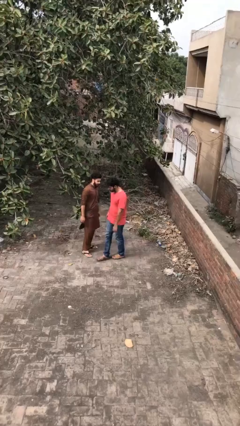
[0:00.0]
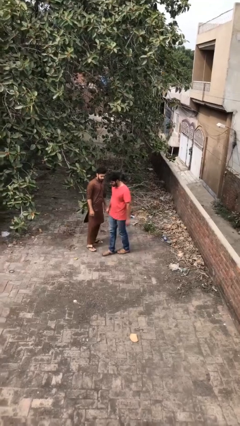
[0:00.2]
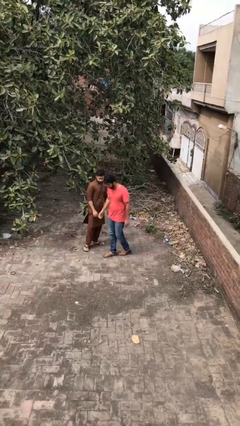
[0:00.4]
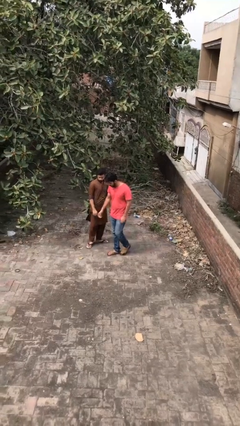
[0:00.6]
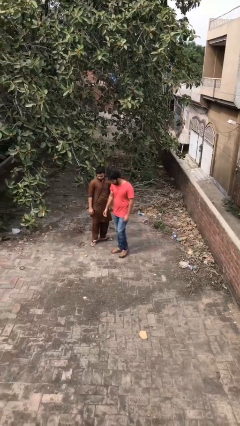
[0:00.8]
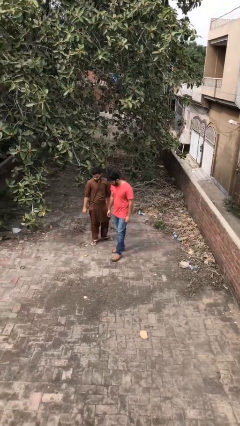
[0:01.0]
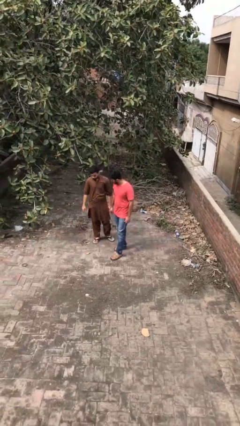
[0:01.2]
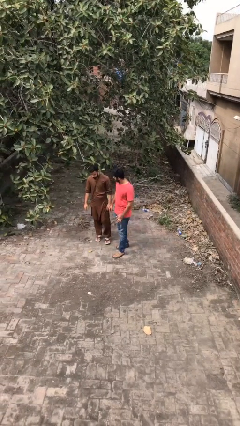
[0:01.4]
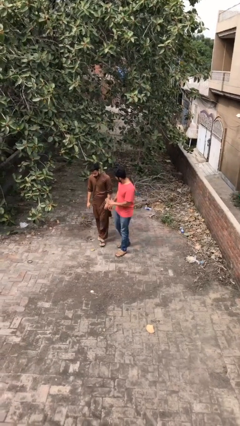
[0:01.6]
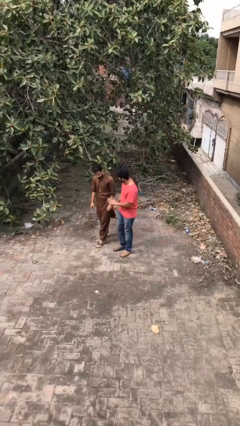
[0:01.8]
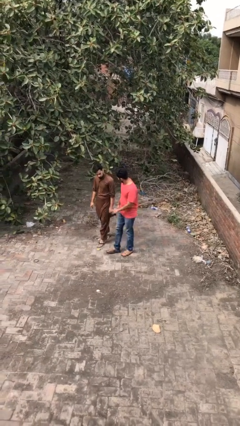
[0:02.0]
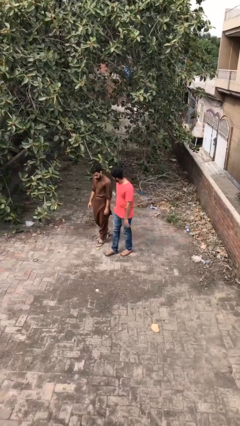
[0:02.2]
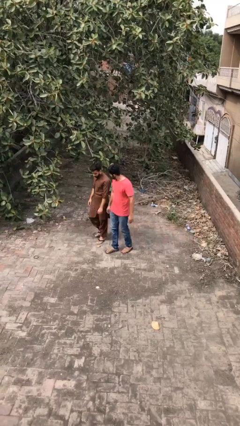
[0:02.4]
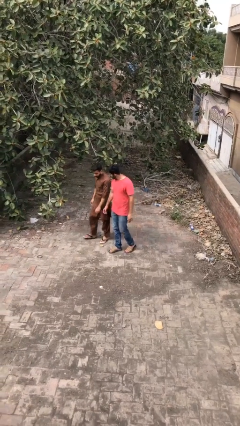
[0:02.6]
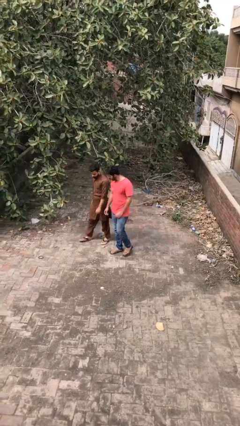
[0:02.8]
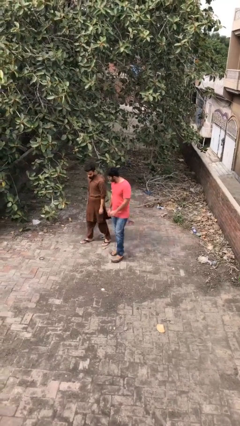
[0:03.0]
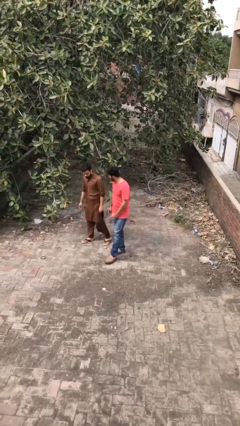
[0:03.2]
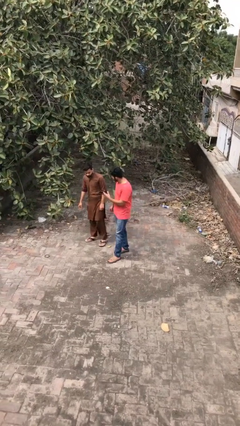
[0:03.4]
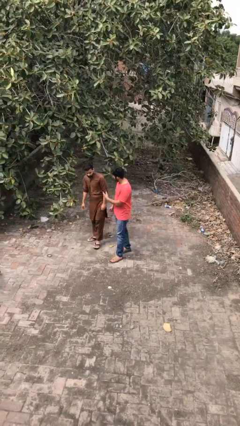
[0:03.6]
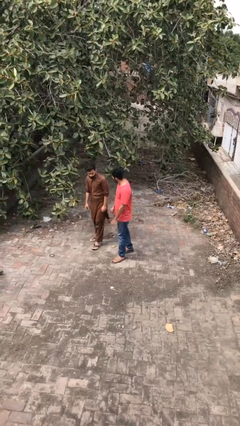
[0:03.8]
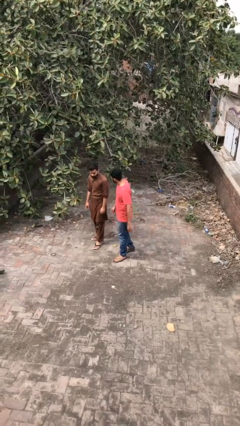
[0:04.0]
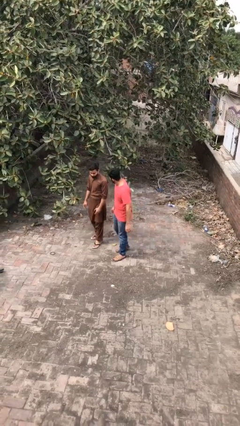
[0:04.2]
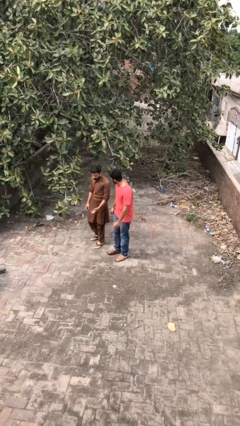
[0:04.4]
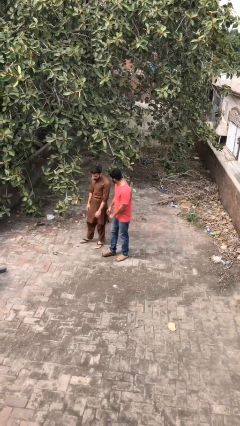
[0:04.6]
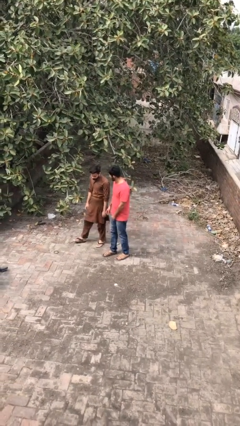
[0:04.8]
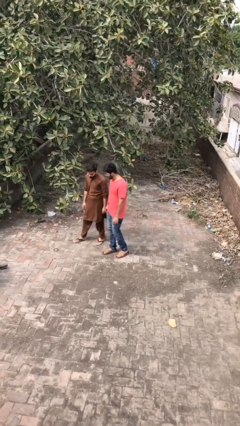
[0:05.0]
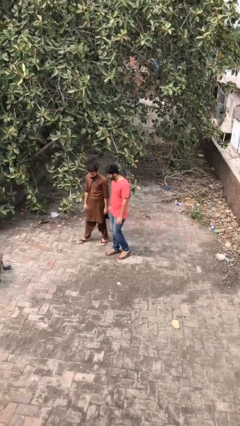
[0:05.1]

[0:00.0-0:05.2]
person talks to person

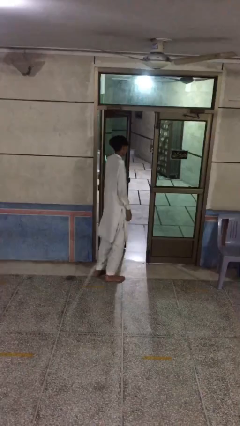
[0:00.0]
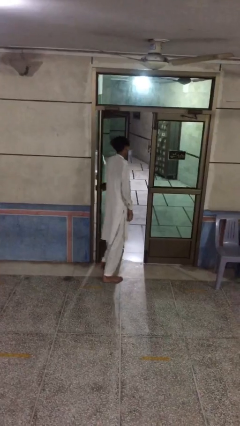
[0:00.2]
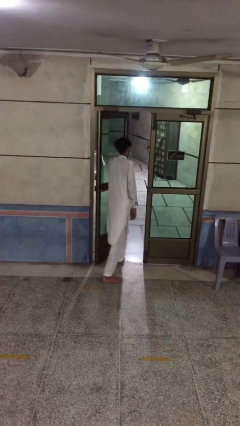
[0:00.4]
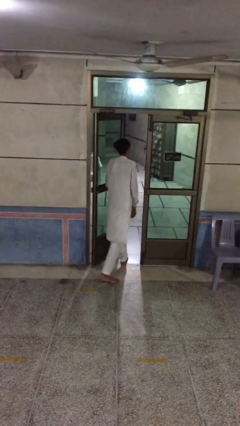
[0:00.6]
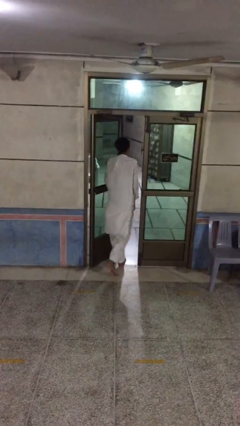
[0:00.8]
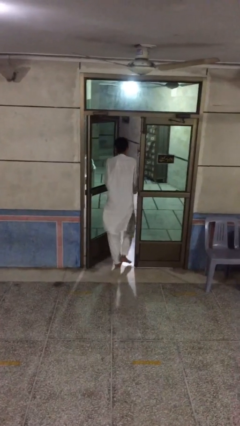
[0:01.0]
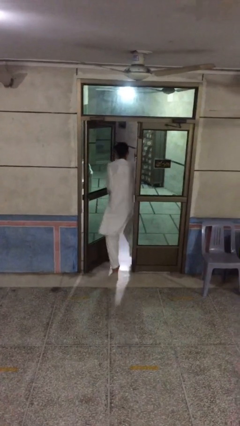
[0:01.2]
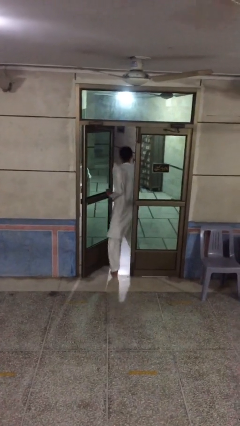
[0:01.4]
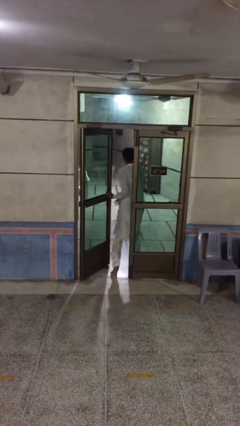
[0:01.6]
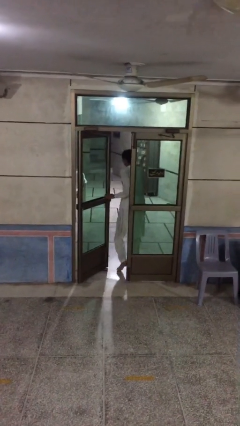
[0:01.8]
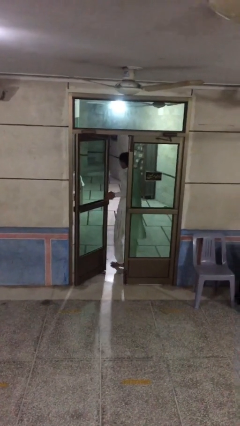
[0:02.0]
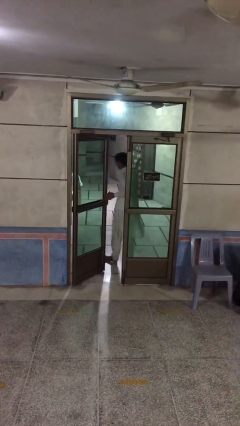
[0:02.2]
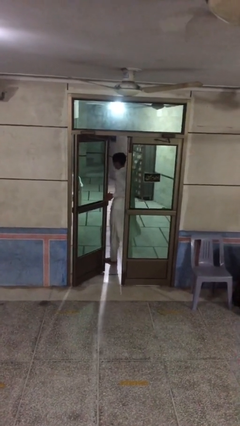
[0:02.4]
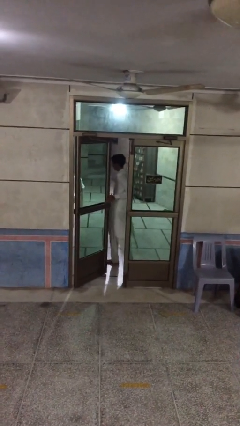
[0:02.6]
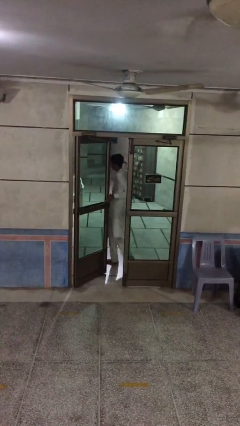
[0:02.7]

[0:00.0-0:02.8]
person exits scene through structure

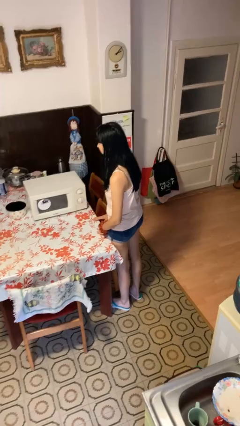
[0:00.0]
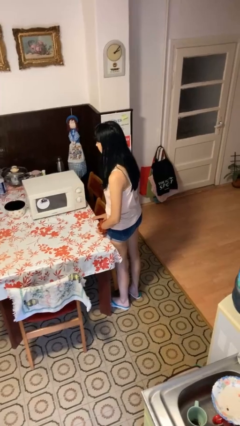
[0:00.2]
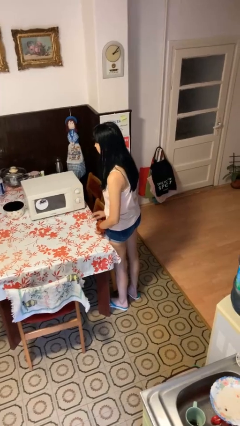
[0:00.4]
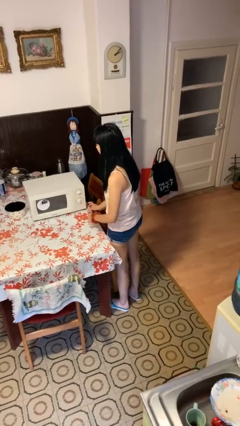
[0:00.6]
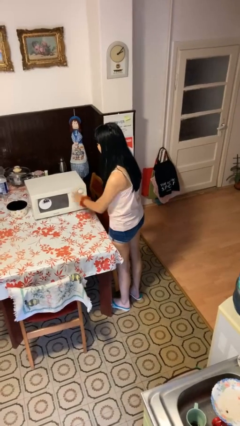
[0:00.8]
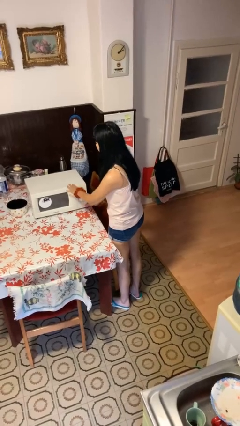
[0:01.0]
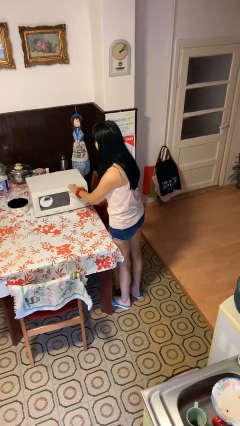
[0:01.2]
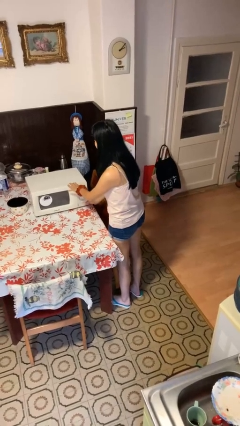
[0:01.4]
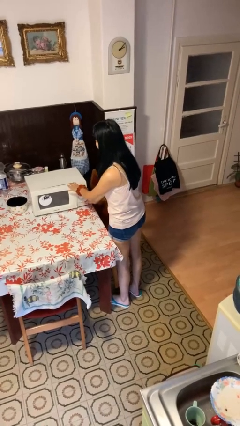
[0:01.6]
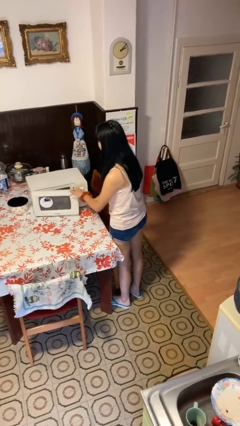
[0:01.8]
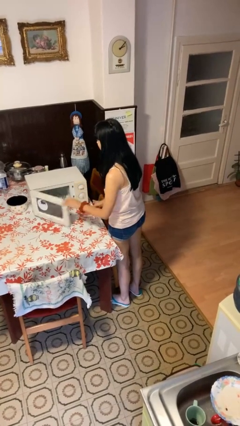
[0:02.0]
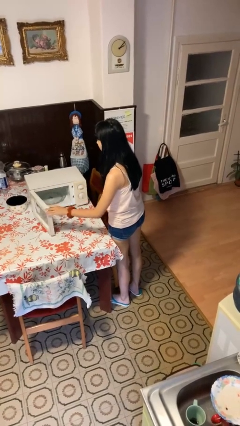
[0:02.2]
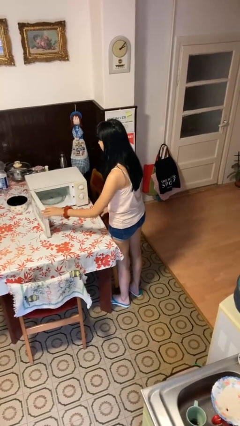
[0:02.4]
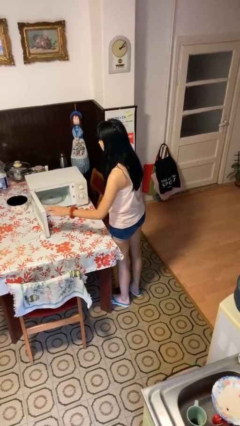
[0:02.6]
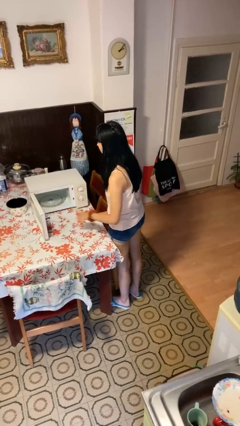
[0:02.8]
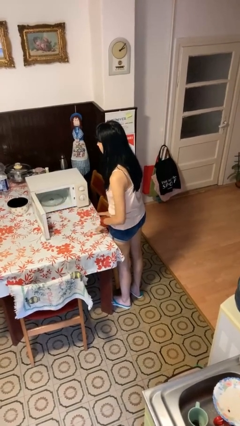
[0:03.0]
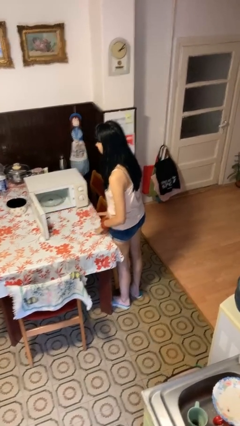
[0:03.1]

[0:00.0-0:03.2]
person opens microwave

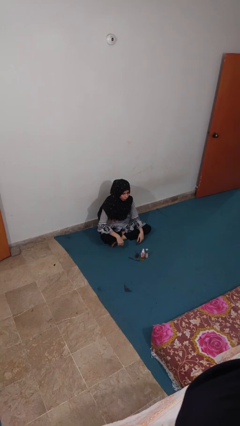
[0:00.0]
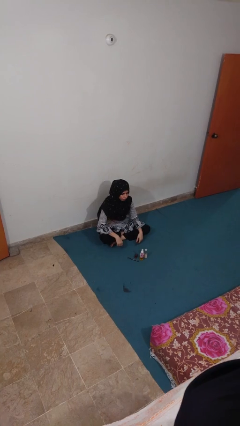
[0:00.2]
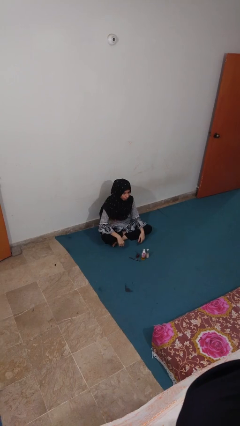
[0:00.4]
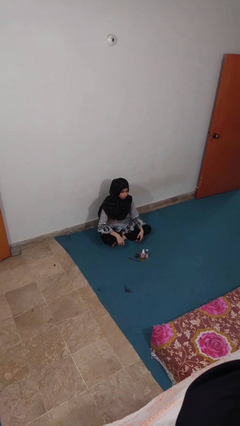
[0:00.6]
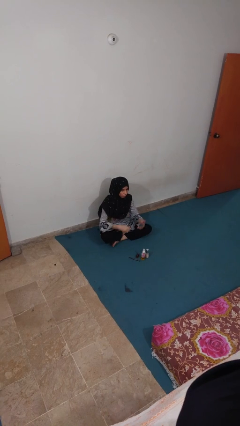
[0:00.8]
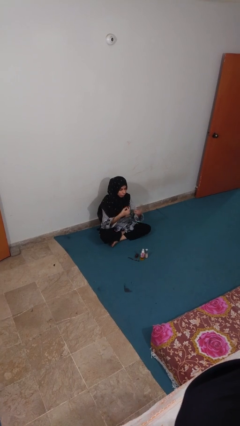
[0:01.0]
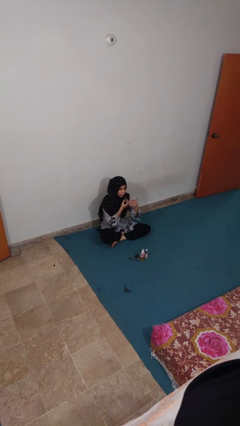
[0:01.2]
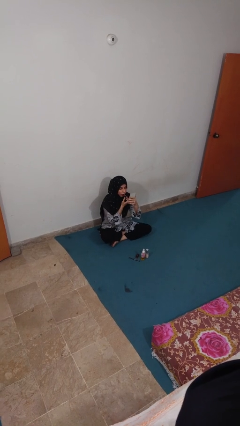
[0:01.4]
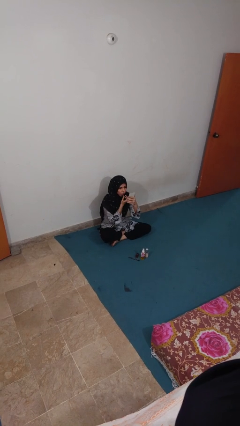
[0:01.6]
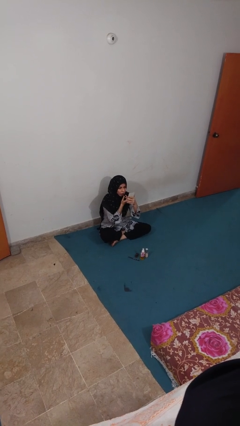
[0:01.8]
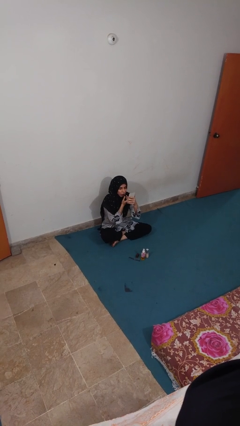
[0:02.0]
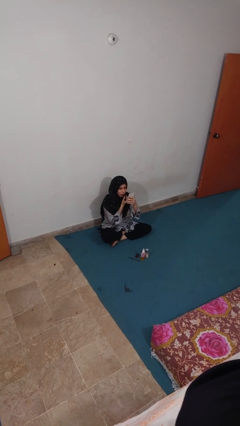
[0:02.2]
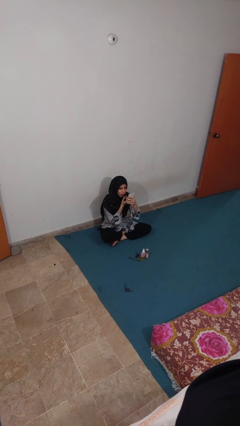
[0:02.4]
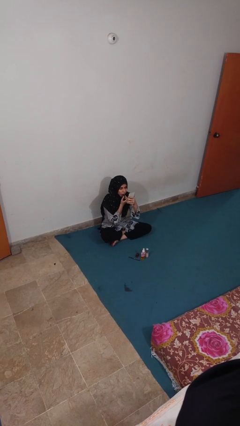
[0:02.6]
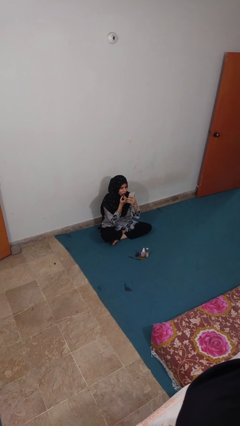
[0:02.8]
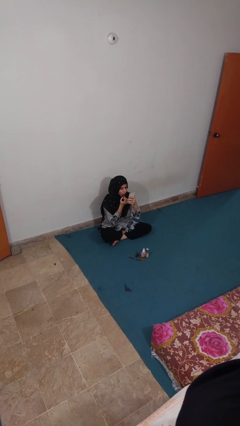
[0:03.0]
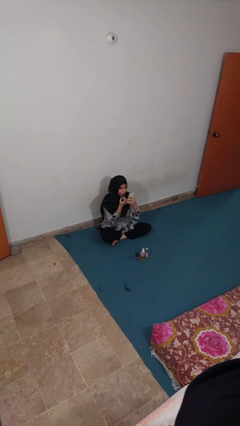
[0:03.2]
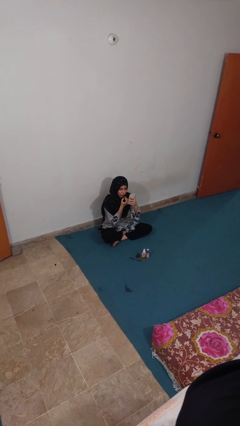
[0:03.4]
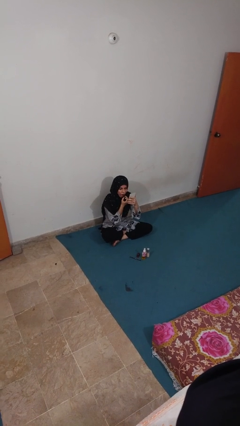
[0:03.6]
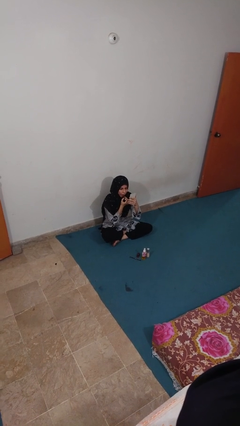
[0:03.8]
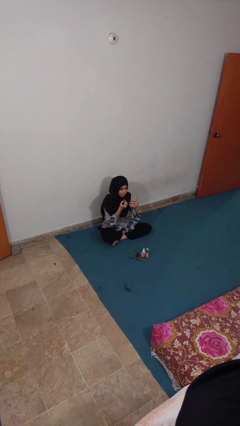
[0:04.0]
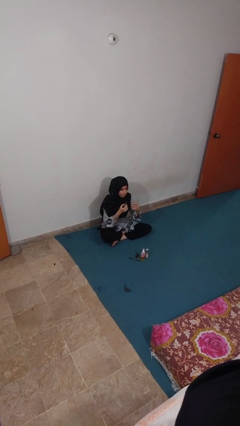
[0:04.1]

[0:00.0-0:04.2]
person applies lip makeup

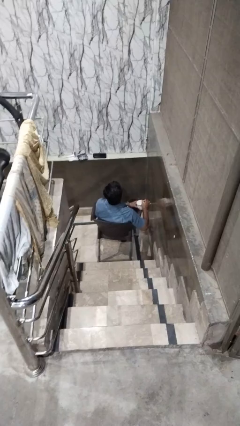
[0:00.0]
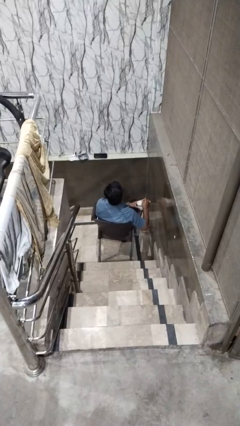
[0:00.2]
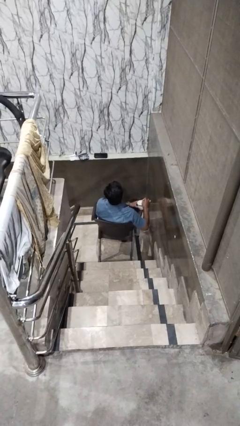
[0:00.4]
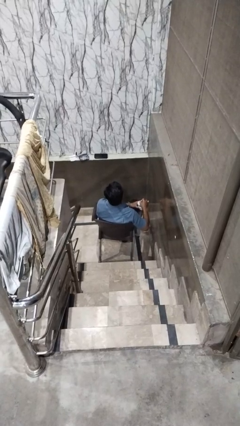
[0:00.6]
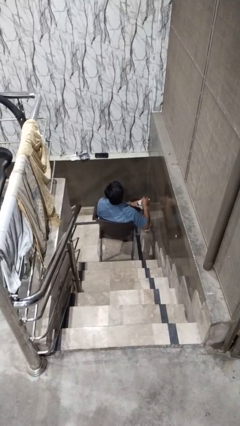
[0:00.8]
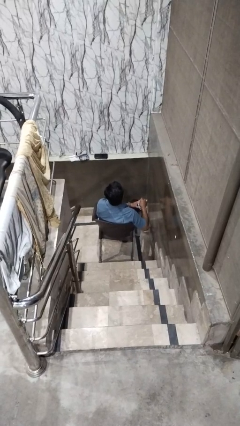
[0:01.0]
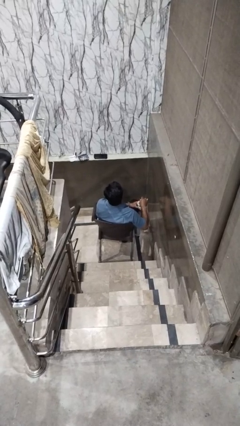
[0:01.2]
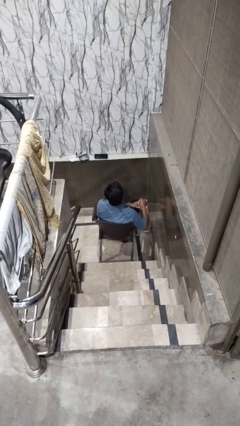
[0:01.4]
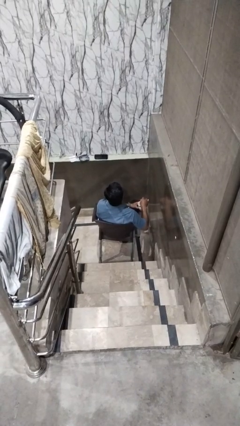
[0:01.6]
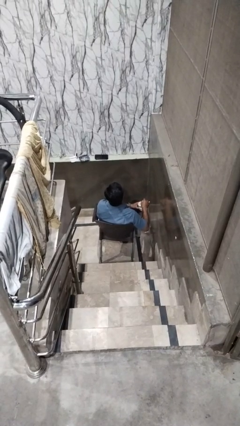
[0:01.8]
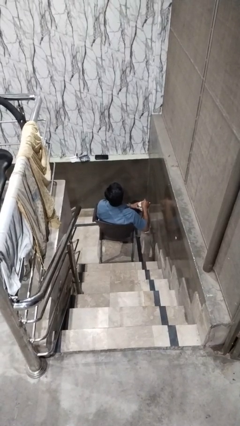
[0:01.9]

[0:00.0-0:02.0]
person stirs mug
